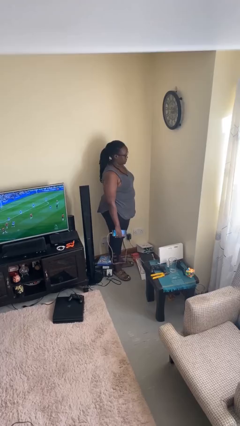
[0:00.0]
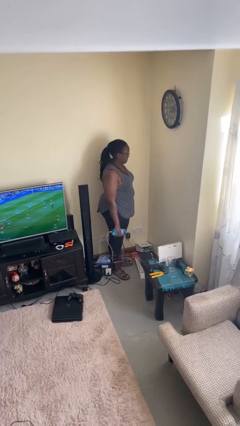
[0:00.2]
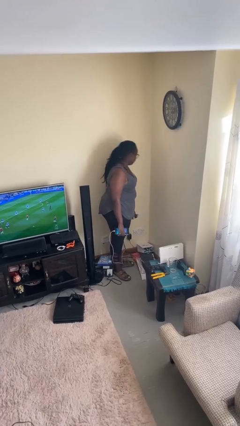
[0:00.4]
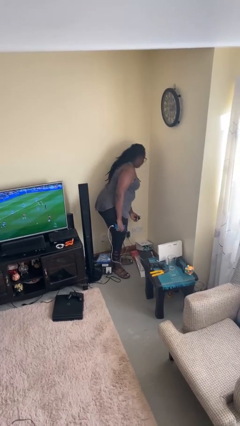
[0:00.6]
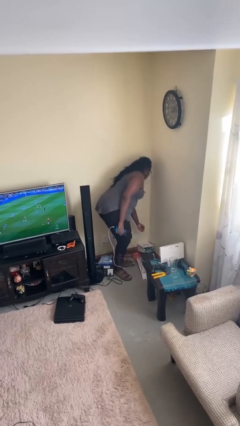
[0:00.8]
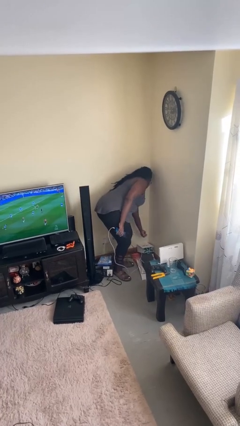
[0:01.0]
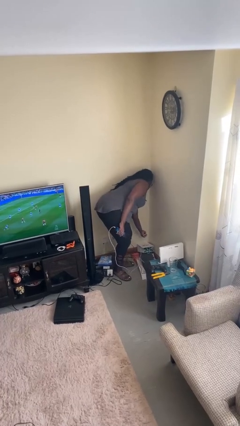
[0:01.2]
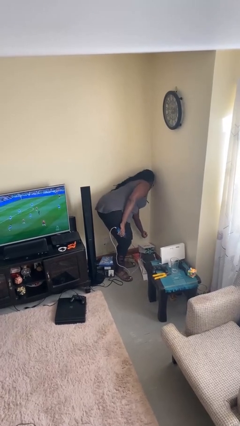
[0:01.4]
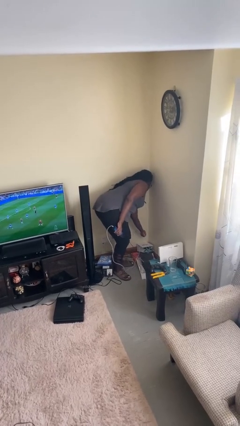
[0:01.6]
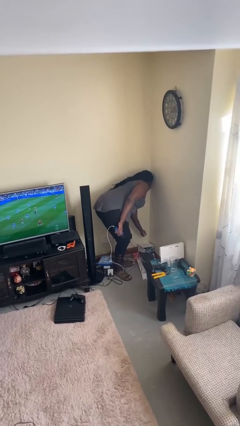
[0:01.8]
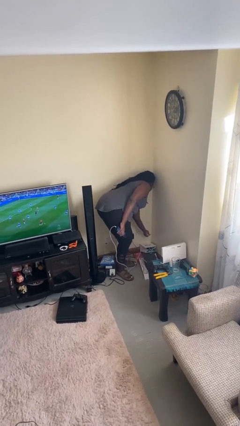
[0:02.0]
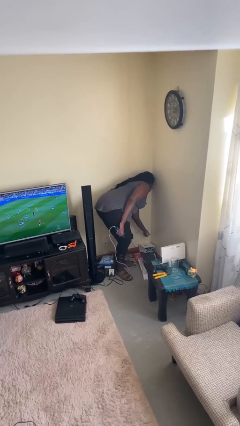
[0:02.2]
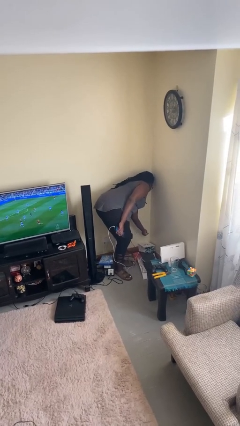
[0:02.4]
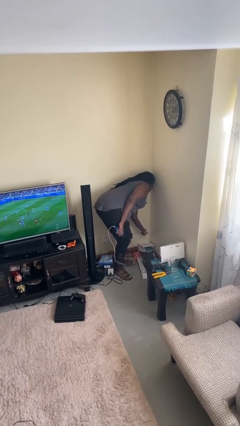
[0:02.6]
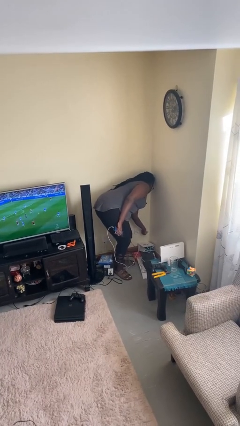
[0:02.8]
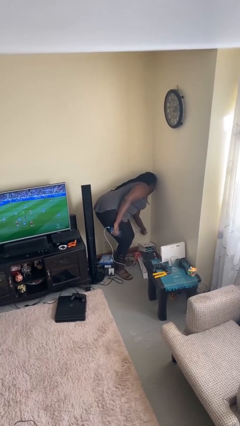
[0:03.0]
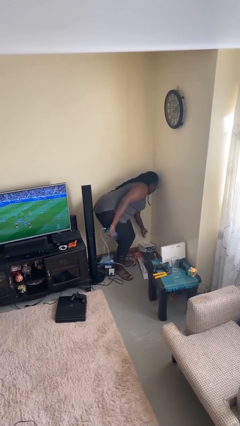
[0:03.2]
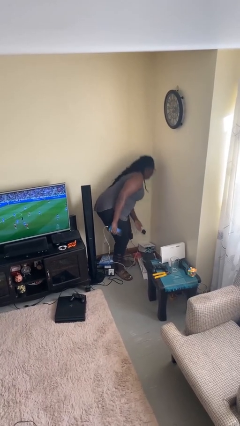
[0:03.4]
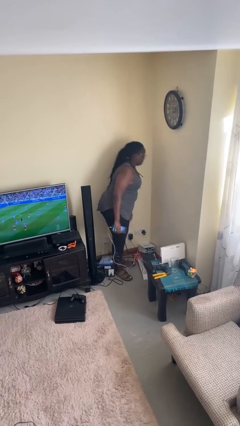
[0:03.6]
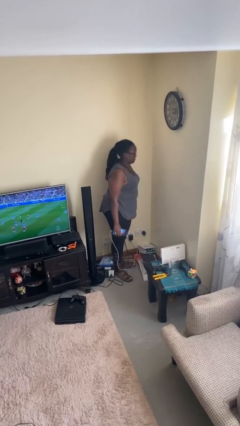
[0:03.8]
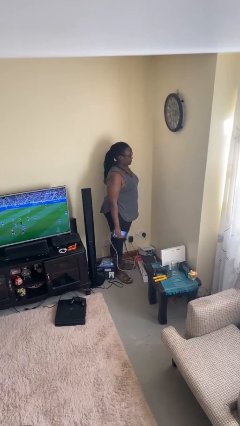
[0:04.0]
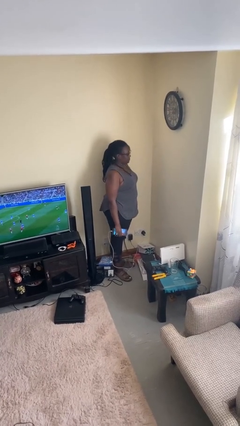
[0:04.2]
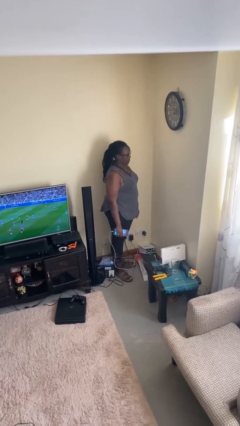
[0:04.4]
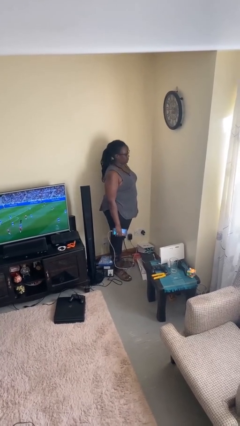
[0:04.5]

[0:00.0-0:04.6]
person plugs into electrical socket

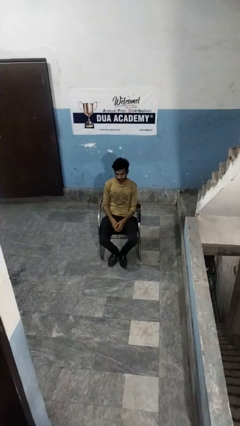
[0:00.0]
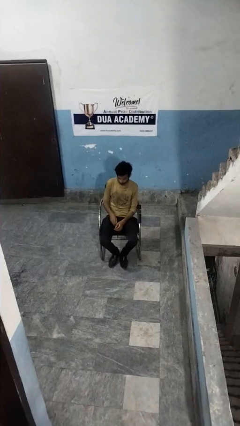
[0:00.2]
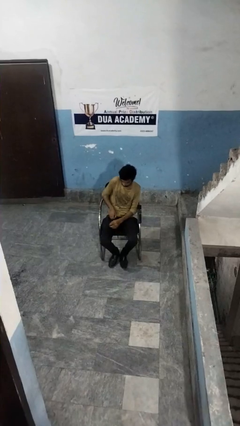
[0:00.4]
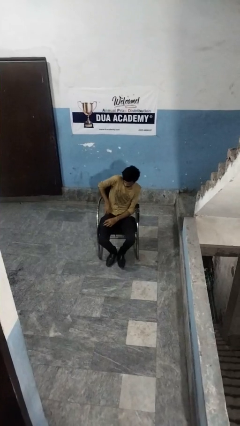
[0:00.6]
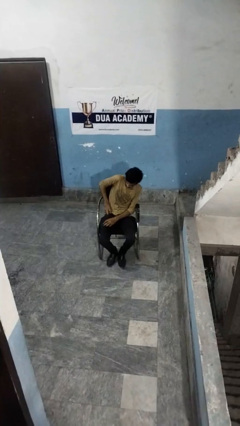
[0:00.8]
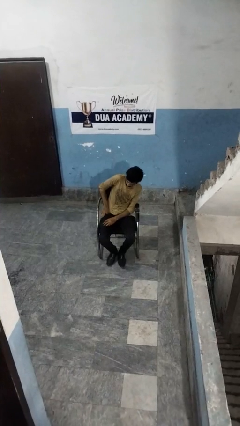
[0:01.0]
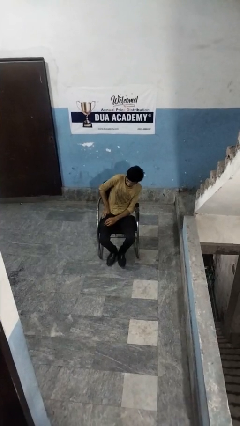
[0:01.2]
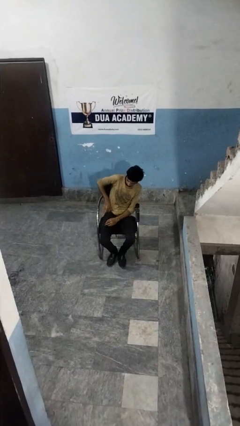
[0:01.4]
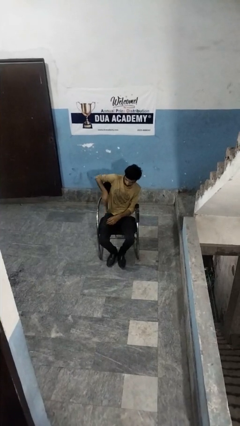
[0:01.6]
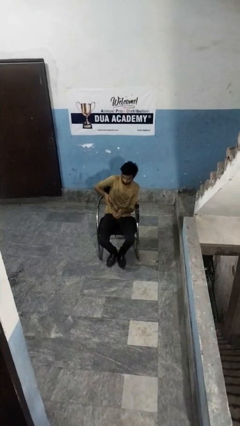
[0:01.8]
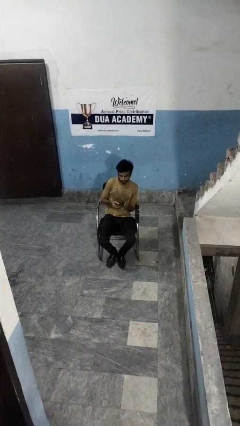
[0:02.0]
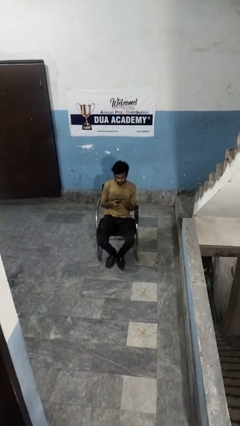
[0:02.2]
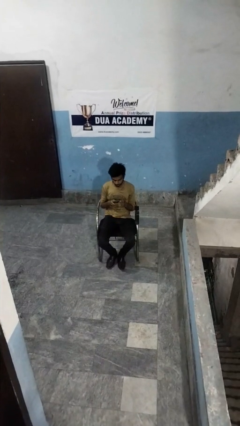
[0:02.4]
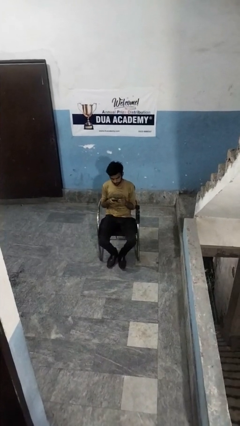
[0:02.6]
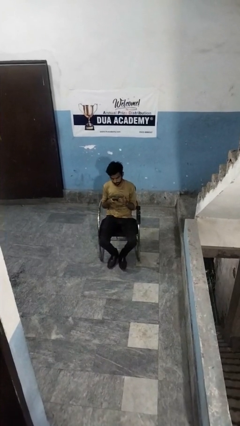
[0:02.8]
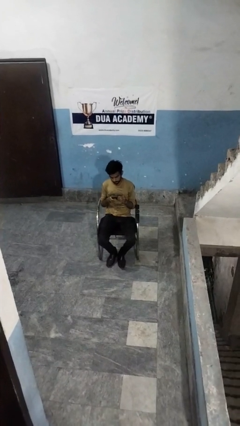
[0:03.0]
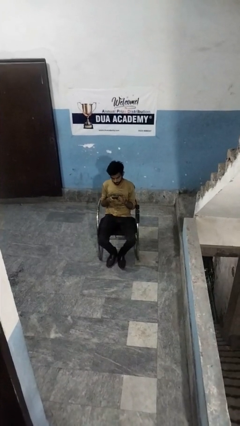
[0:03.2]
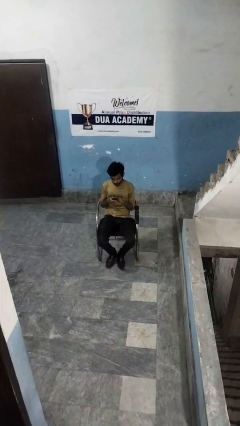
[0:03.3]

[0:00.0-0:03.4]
person takes phone from pocket

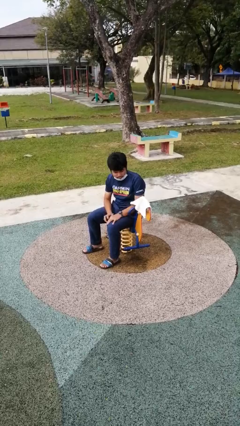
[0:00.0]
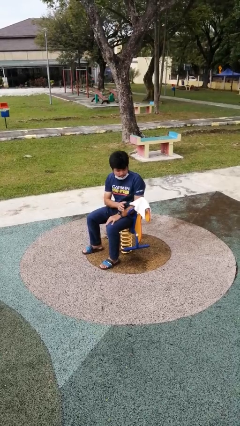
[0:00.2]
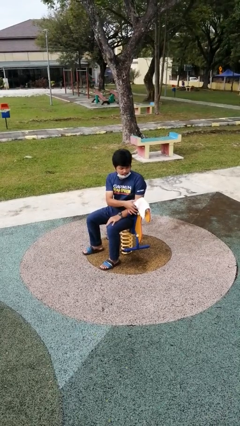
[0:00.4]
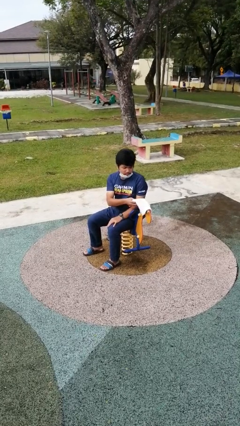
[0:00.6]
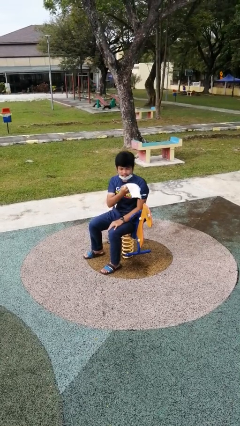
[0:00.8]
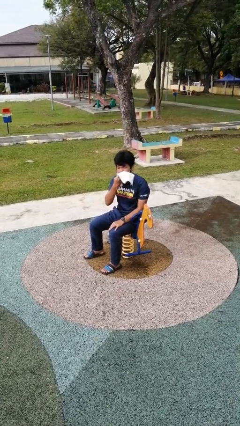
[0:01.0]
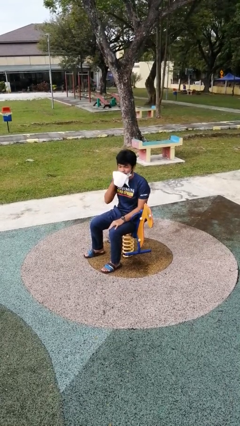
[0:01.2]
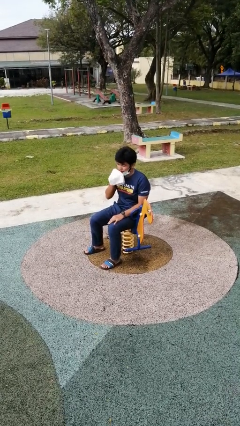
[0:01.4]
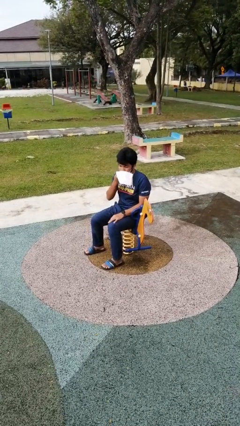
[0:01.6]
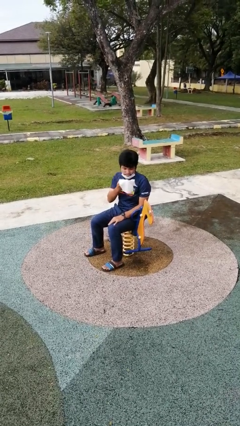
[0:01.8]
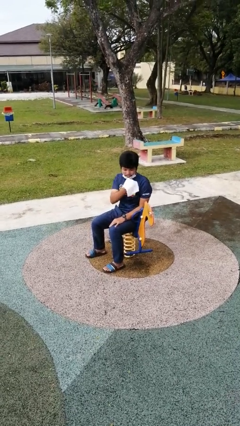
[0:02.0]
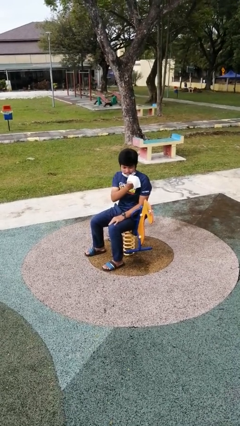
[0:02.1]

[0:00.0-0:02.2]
person wipes mouth with napkin

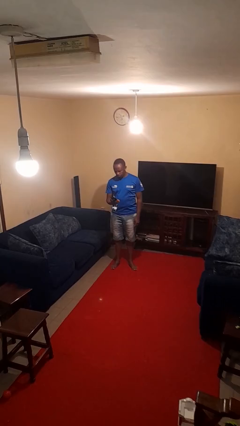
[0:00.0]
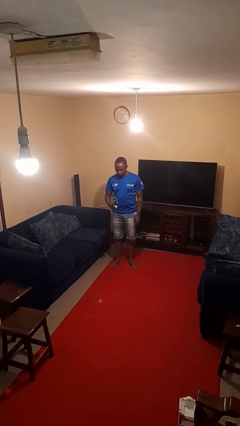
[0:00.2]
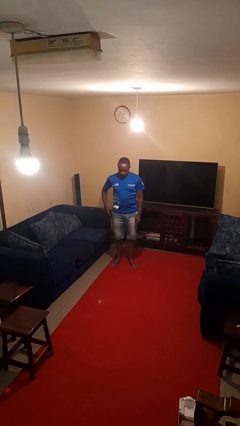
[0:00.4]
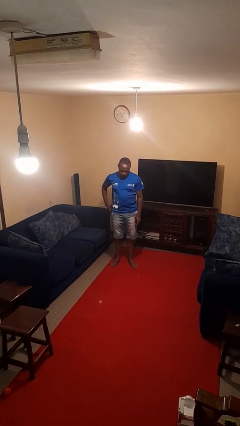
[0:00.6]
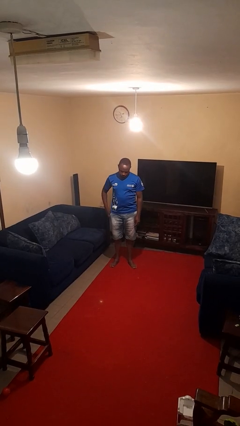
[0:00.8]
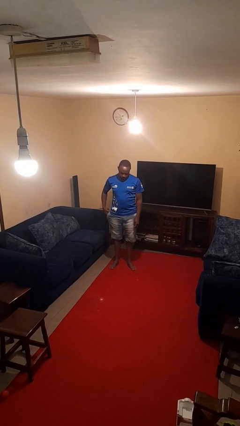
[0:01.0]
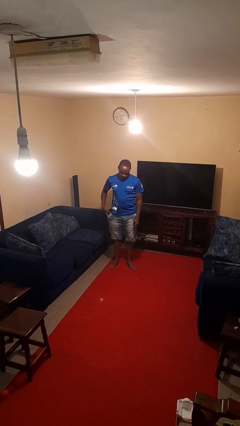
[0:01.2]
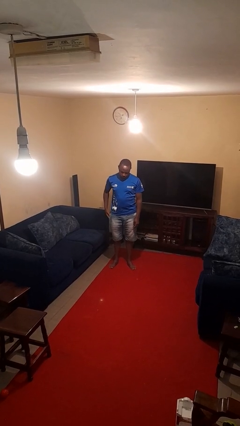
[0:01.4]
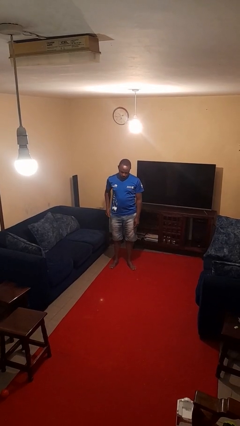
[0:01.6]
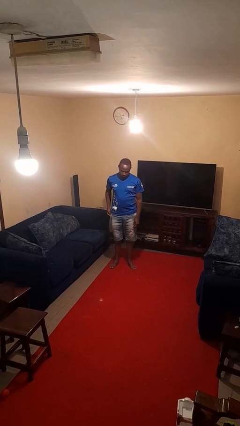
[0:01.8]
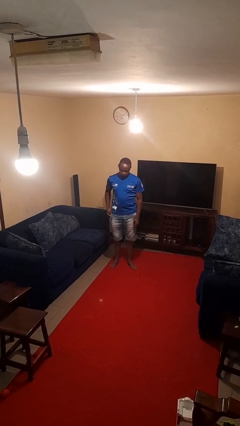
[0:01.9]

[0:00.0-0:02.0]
person puts phone into pocket

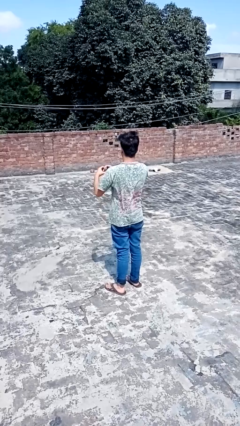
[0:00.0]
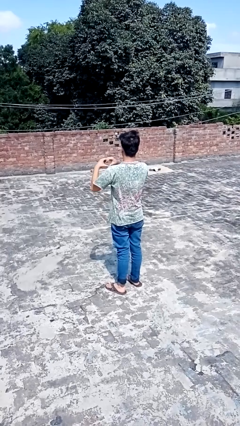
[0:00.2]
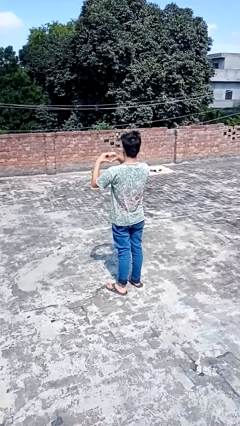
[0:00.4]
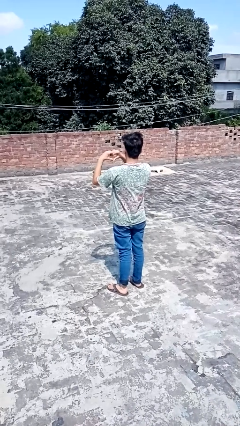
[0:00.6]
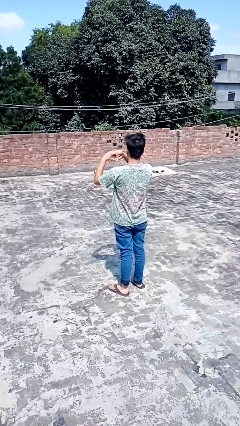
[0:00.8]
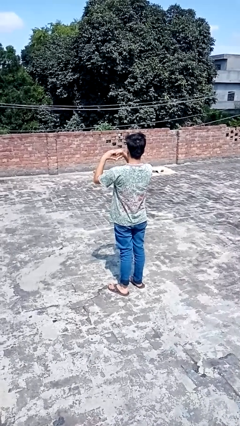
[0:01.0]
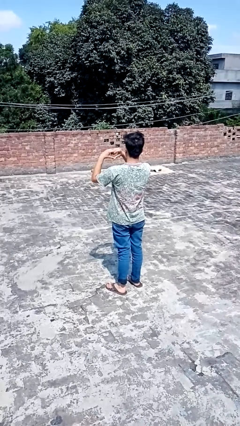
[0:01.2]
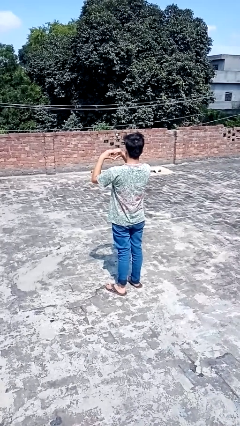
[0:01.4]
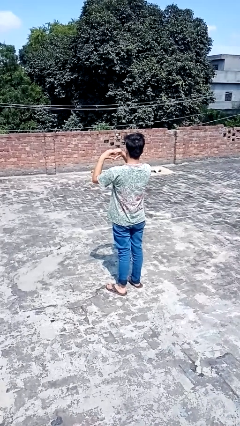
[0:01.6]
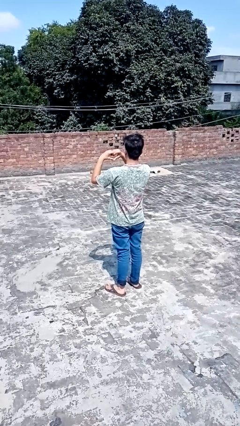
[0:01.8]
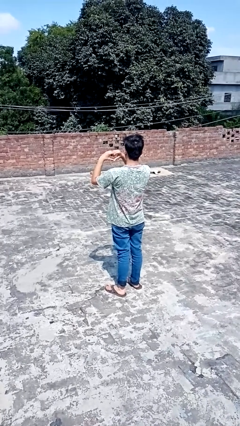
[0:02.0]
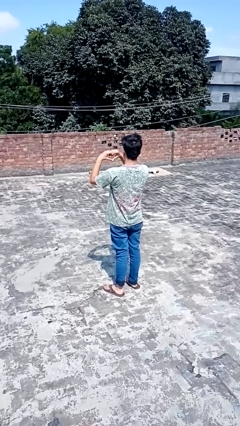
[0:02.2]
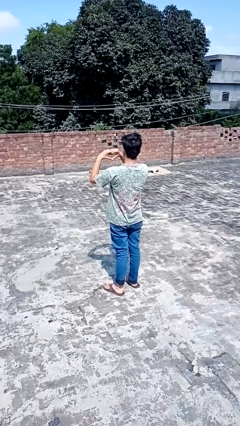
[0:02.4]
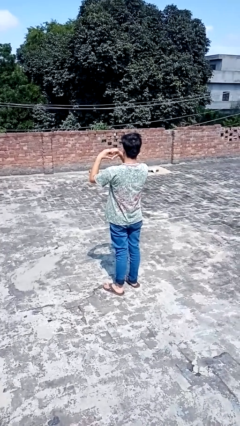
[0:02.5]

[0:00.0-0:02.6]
person gestures heart

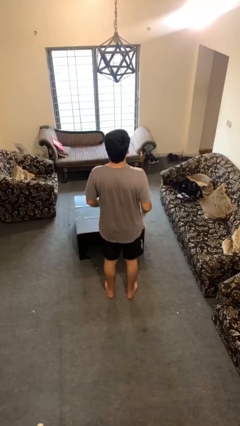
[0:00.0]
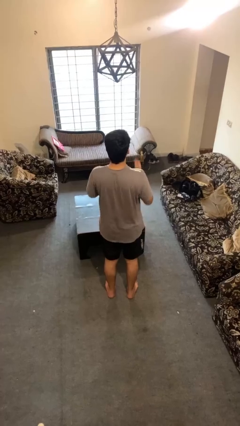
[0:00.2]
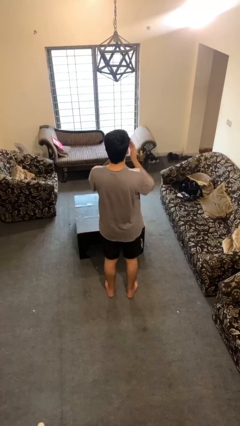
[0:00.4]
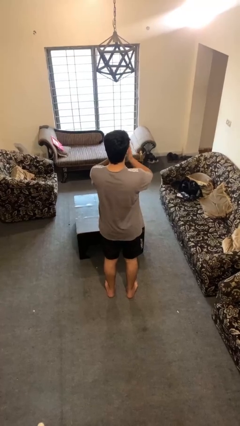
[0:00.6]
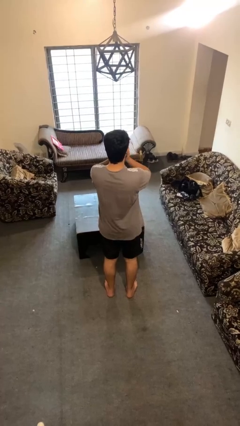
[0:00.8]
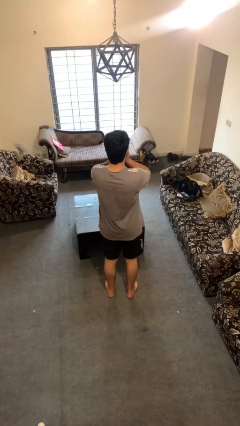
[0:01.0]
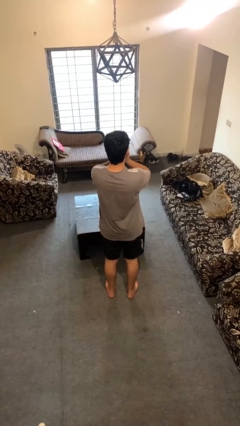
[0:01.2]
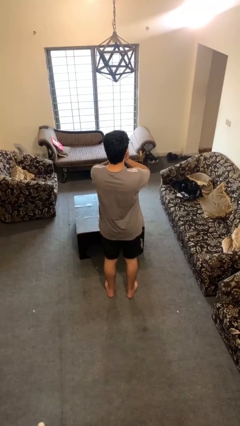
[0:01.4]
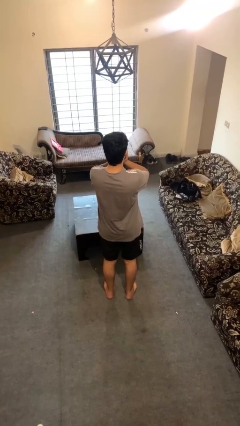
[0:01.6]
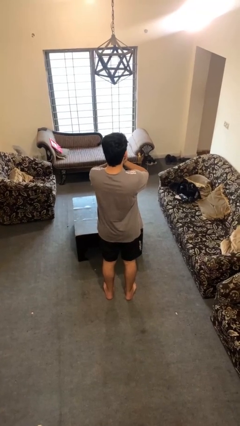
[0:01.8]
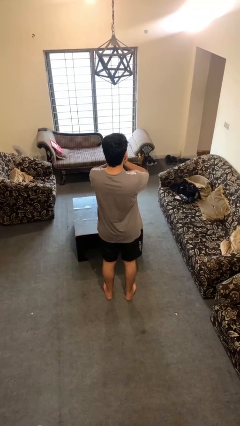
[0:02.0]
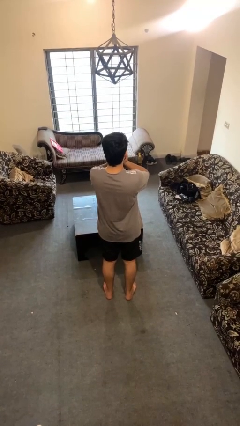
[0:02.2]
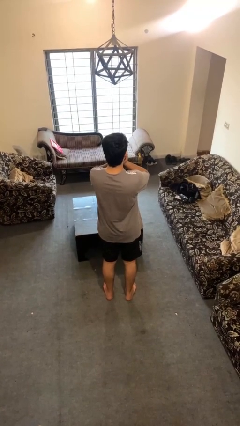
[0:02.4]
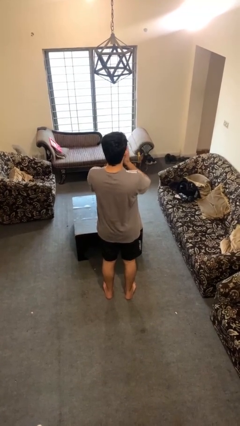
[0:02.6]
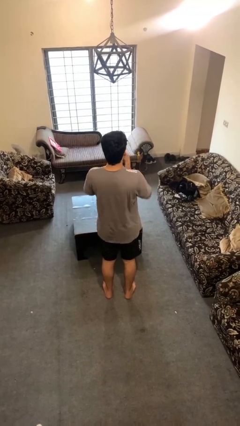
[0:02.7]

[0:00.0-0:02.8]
person covers face with hands

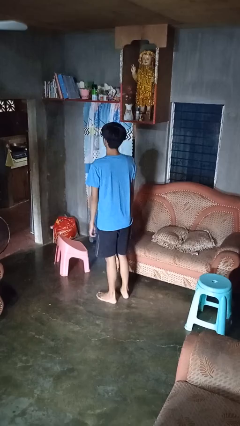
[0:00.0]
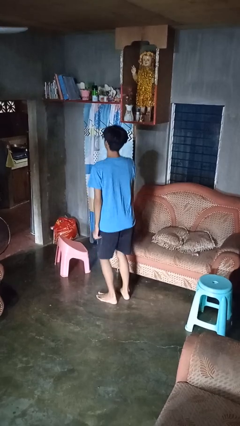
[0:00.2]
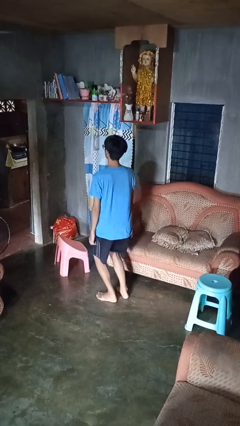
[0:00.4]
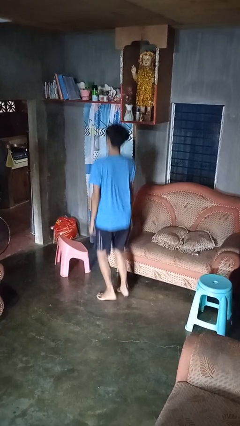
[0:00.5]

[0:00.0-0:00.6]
person jumps
